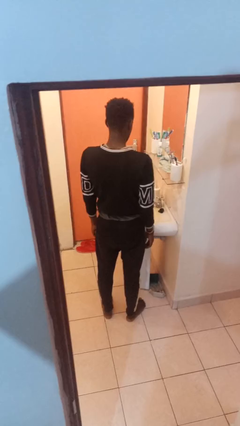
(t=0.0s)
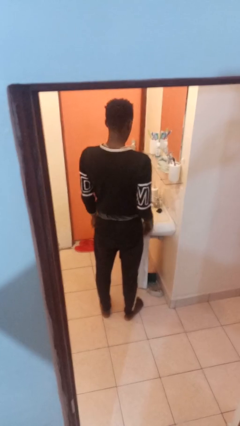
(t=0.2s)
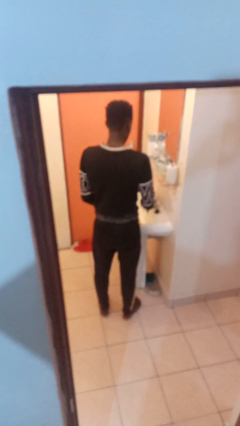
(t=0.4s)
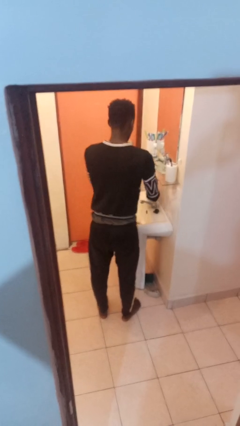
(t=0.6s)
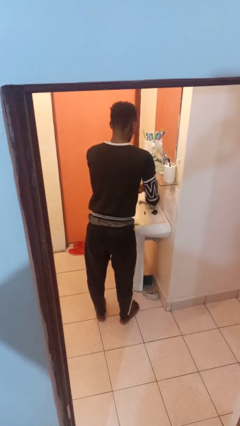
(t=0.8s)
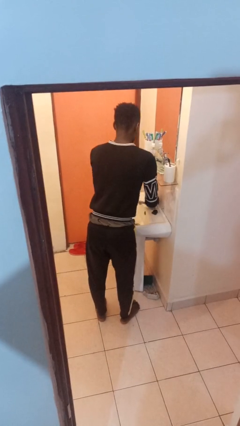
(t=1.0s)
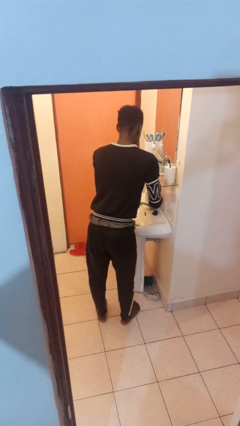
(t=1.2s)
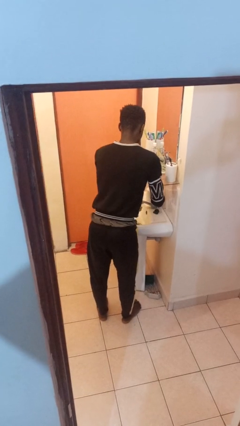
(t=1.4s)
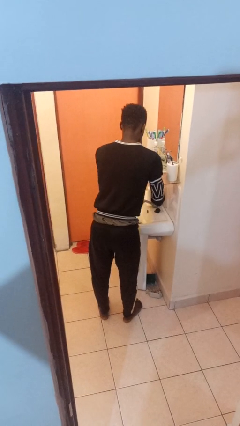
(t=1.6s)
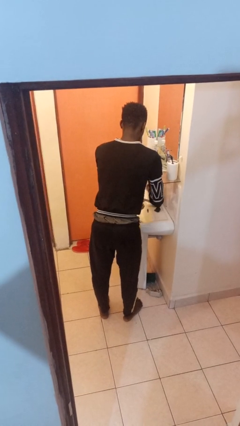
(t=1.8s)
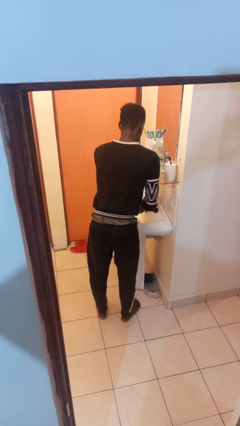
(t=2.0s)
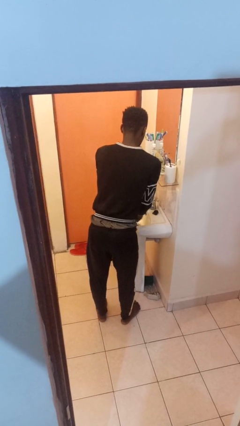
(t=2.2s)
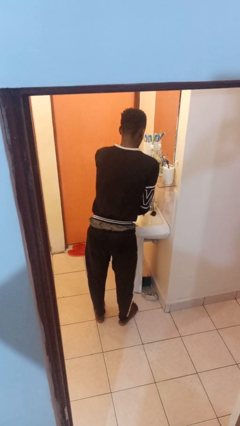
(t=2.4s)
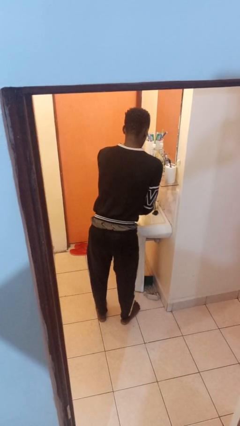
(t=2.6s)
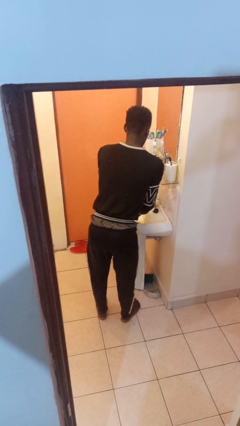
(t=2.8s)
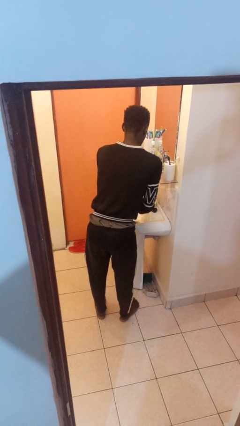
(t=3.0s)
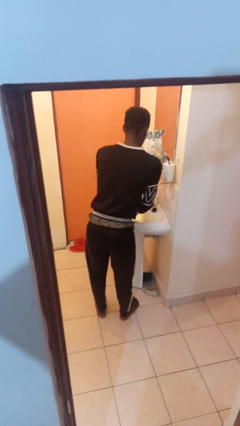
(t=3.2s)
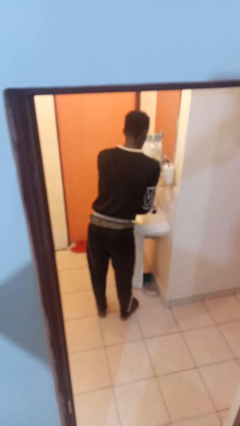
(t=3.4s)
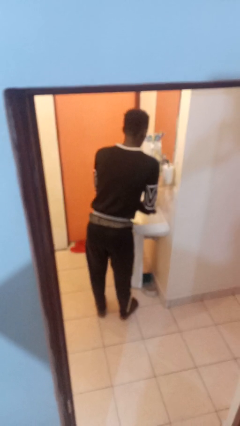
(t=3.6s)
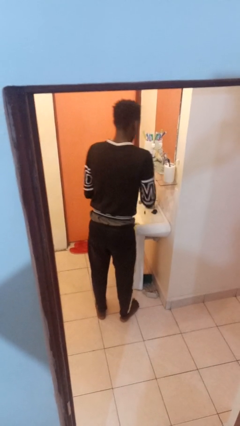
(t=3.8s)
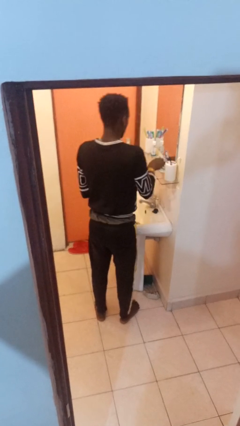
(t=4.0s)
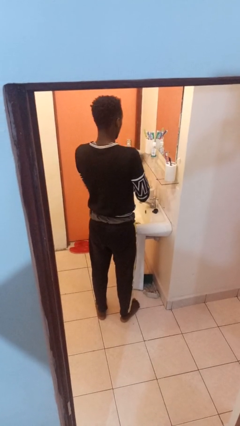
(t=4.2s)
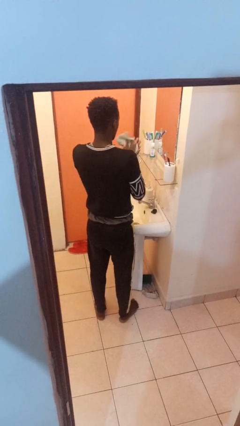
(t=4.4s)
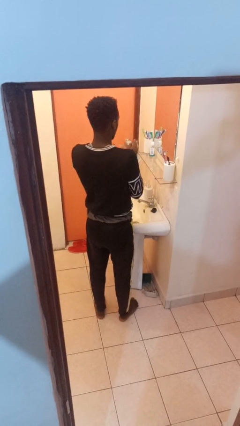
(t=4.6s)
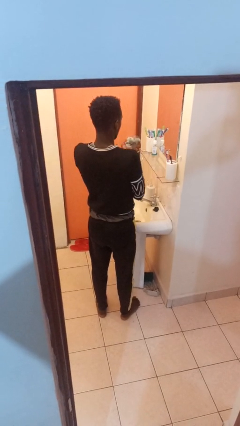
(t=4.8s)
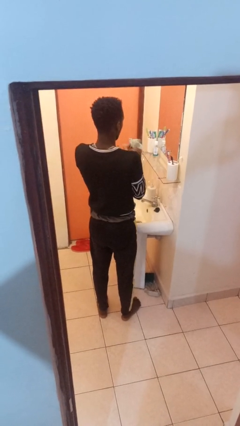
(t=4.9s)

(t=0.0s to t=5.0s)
person washes hands

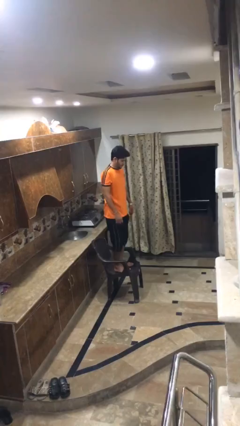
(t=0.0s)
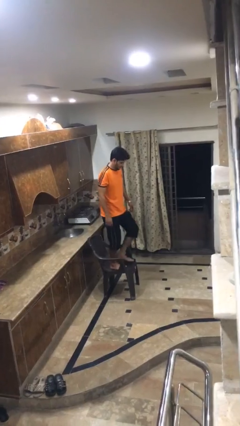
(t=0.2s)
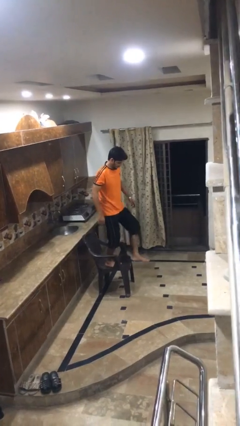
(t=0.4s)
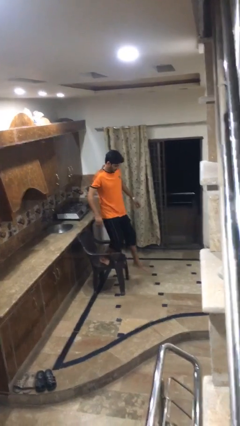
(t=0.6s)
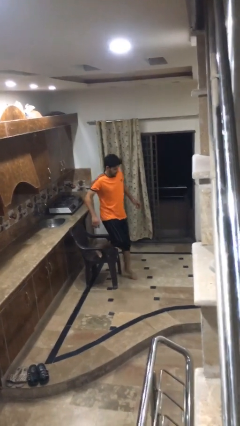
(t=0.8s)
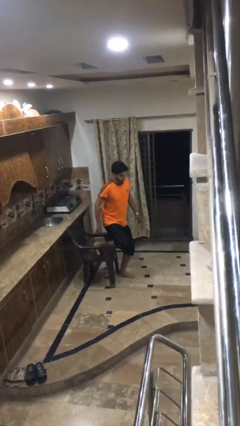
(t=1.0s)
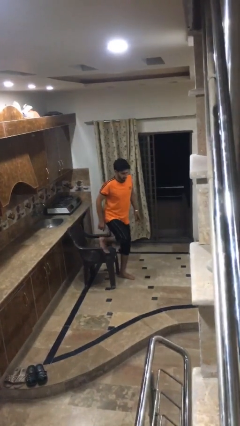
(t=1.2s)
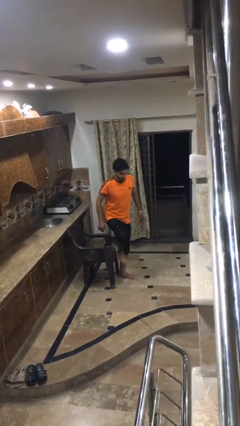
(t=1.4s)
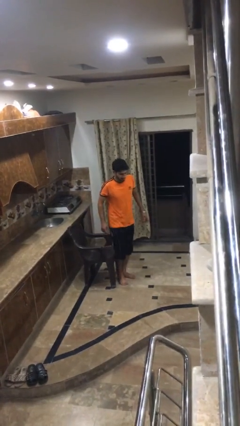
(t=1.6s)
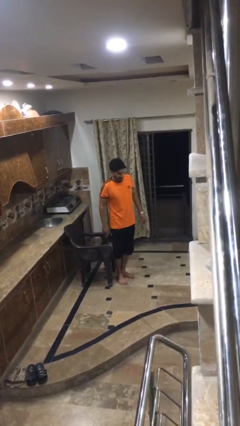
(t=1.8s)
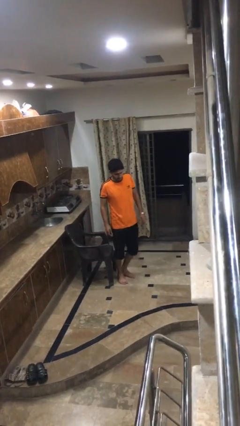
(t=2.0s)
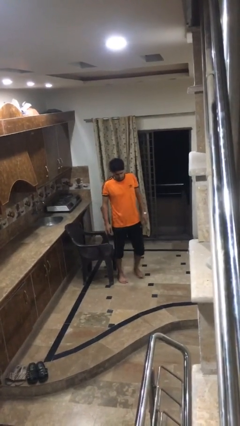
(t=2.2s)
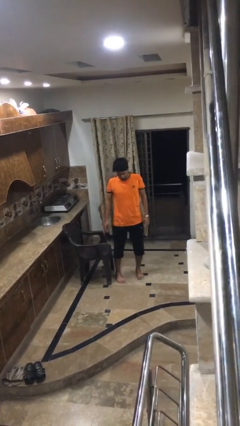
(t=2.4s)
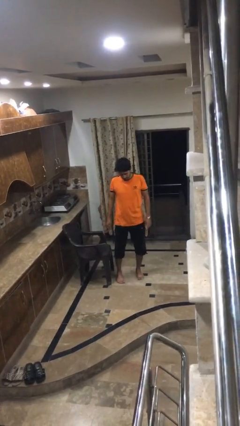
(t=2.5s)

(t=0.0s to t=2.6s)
person climbs off chair

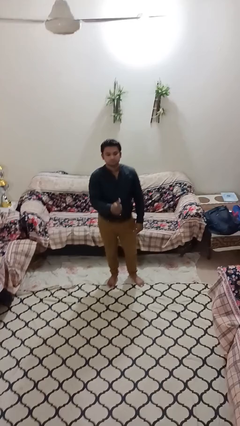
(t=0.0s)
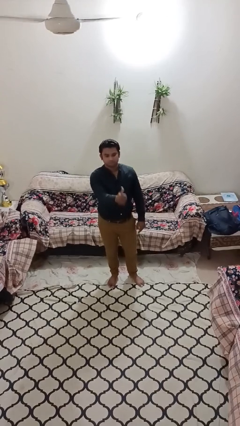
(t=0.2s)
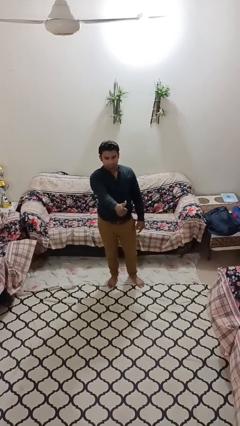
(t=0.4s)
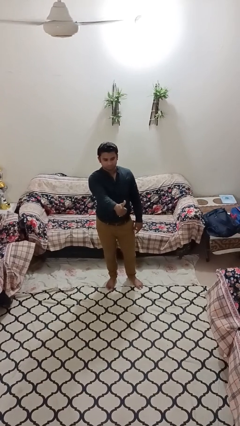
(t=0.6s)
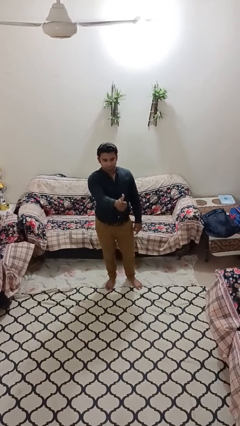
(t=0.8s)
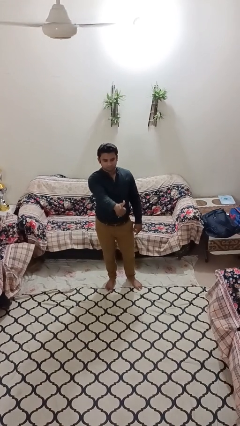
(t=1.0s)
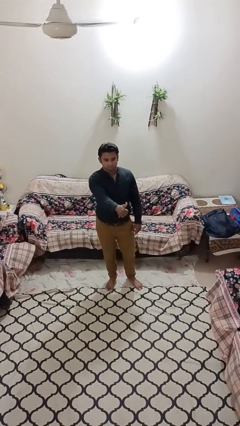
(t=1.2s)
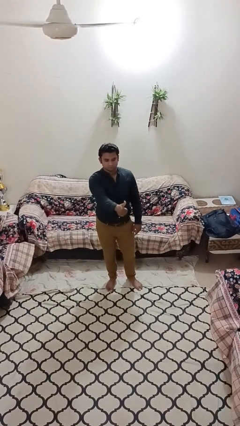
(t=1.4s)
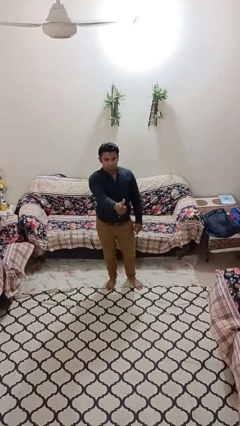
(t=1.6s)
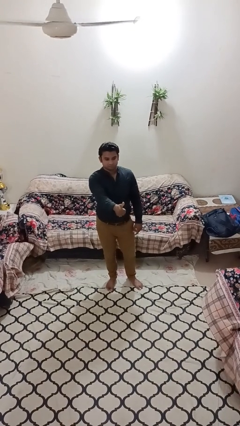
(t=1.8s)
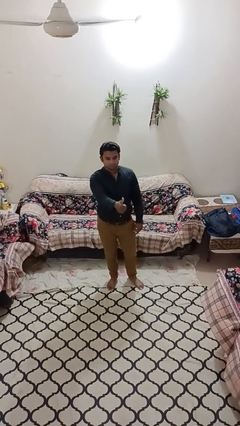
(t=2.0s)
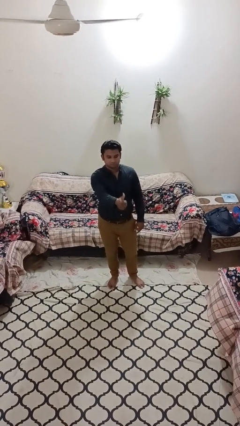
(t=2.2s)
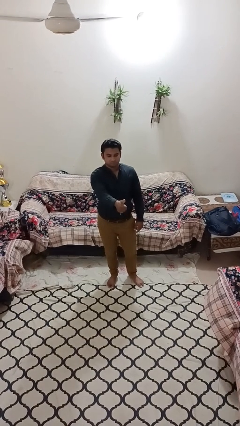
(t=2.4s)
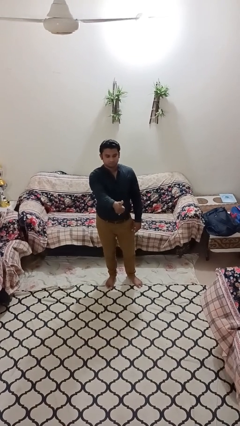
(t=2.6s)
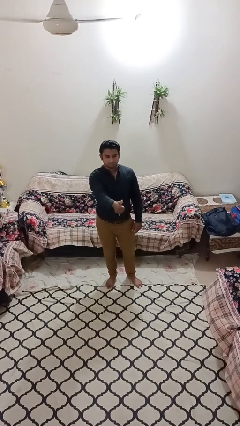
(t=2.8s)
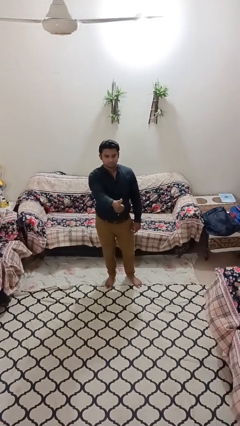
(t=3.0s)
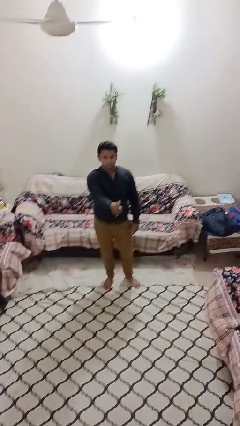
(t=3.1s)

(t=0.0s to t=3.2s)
person gestures thumbs up

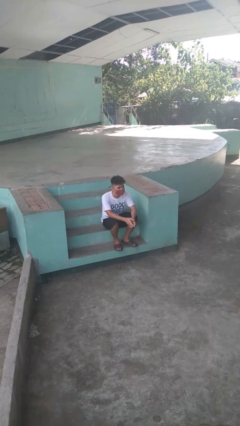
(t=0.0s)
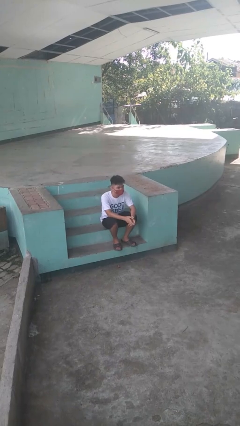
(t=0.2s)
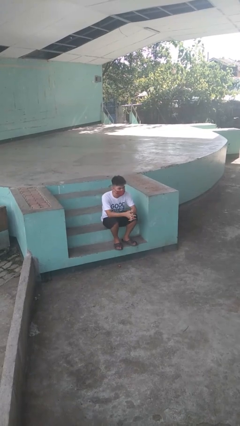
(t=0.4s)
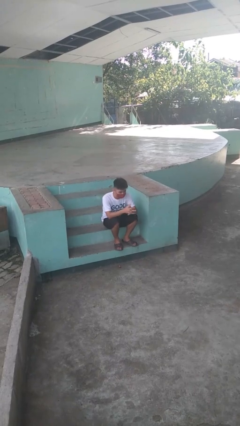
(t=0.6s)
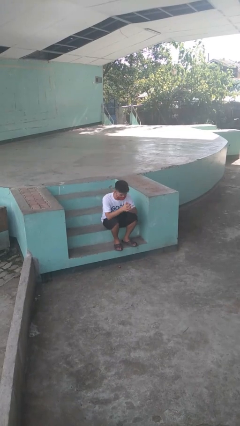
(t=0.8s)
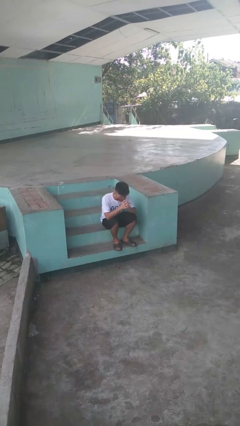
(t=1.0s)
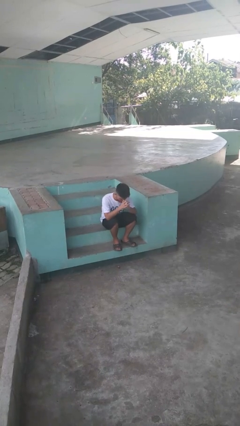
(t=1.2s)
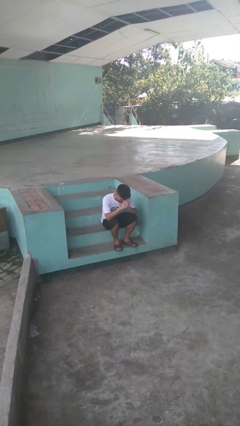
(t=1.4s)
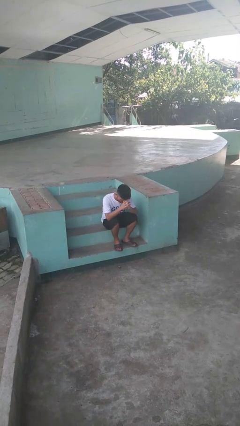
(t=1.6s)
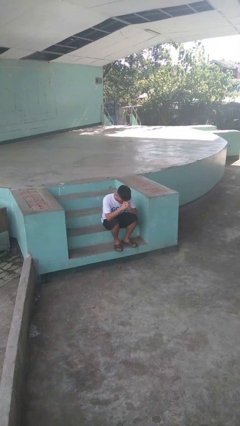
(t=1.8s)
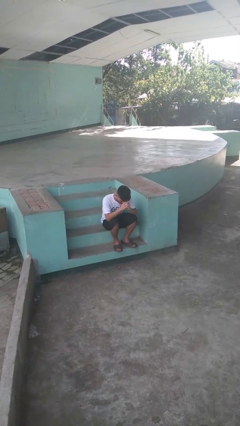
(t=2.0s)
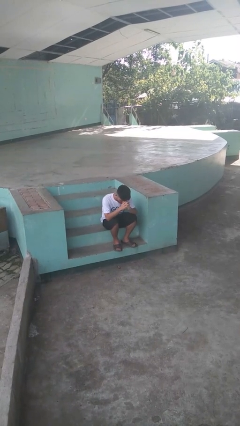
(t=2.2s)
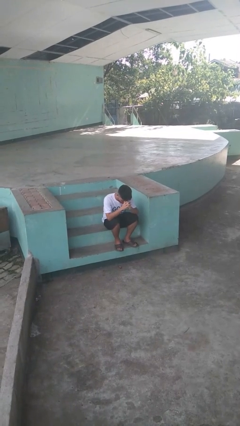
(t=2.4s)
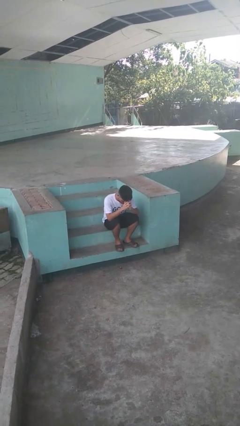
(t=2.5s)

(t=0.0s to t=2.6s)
person prays

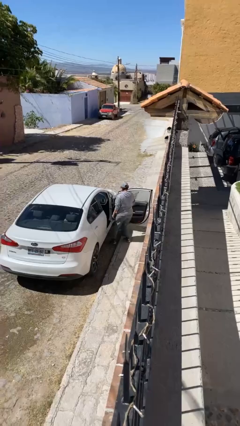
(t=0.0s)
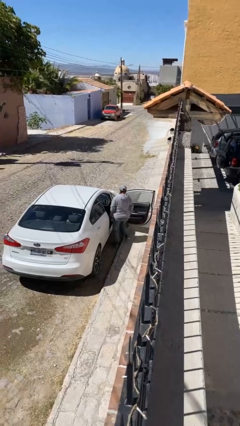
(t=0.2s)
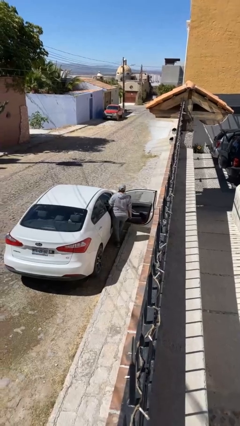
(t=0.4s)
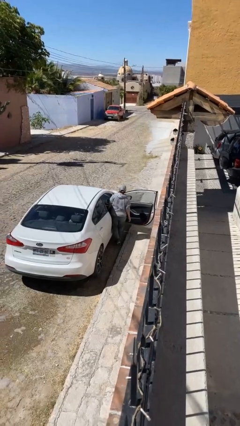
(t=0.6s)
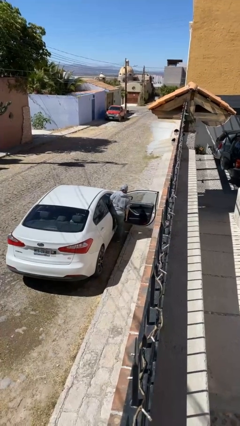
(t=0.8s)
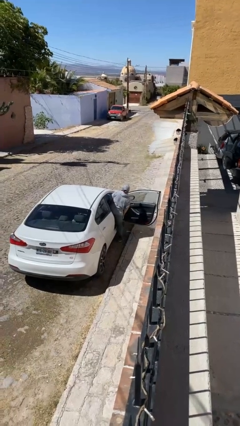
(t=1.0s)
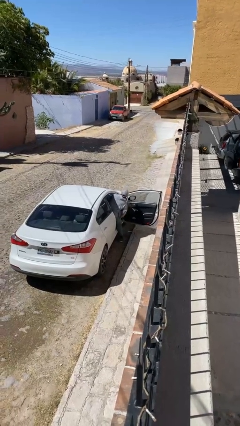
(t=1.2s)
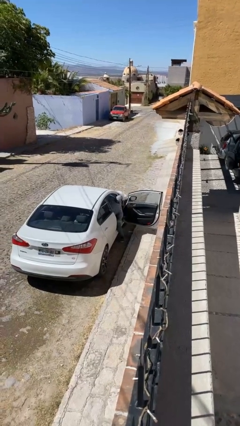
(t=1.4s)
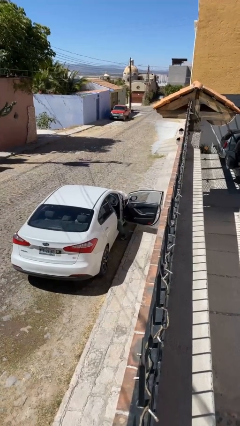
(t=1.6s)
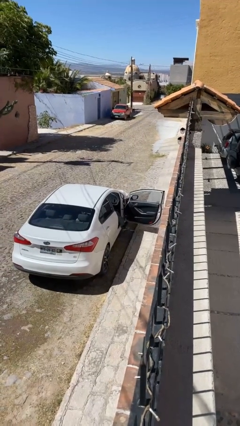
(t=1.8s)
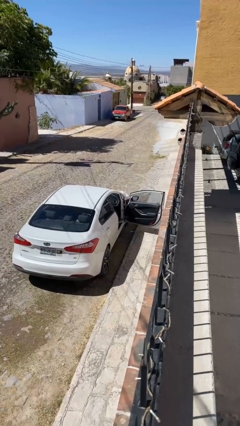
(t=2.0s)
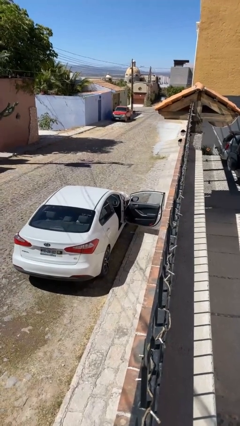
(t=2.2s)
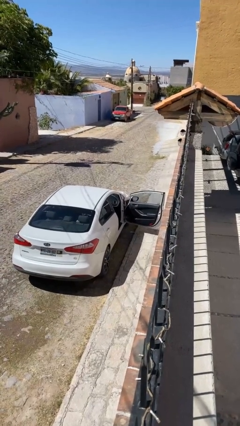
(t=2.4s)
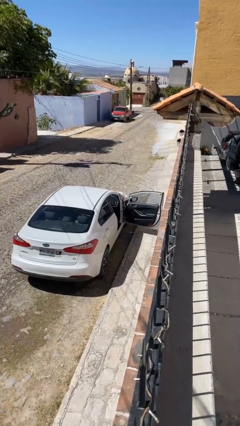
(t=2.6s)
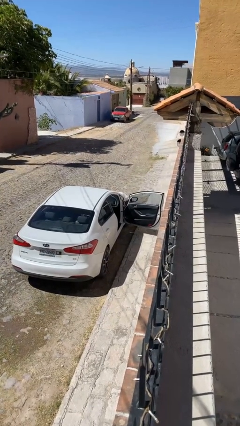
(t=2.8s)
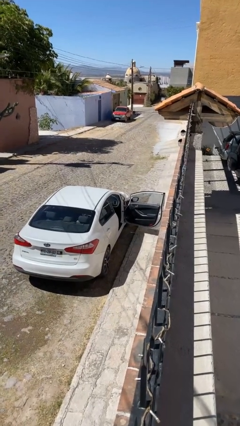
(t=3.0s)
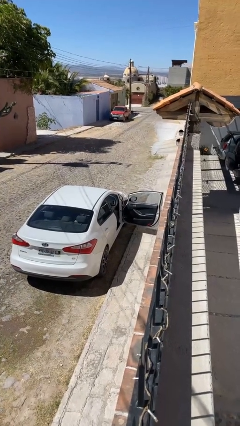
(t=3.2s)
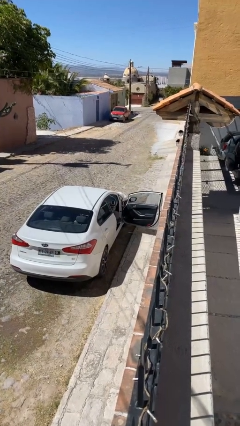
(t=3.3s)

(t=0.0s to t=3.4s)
person enters car

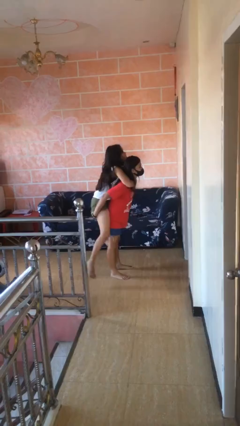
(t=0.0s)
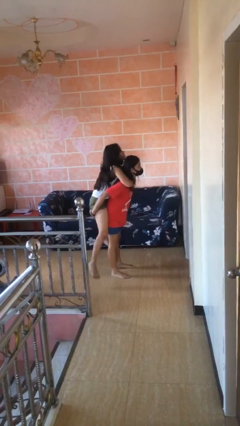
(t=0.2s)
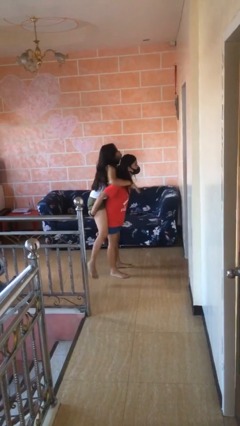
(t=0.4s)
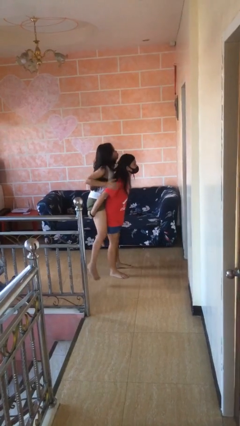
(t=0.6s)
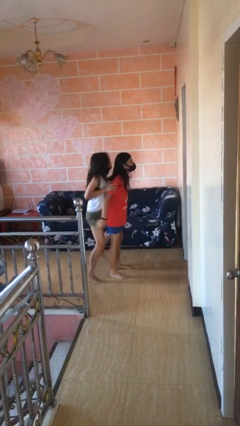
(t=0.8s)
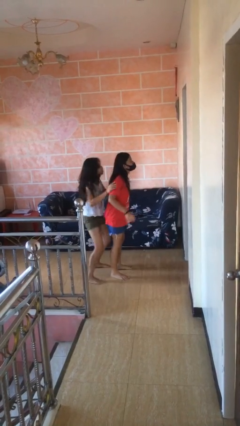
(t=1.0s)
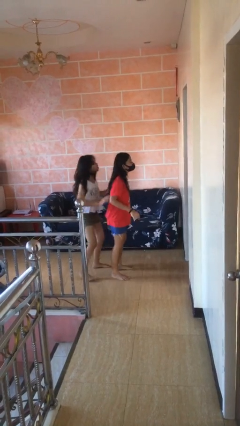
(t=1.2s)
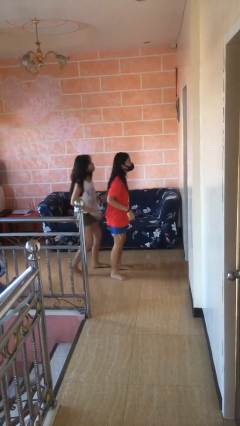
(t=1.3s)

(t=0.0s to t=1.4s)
person puts down person
